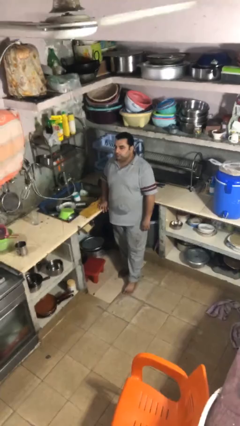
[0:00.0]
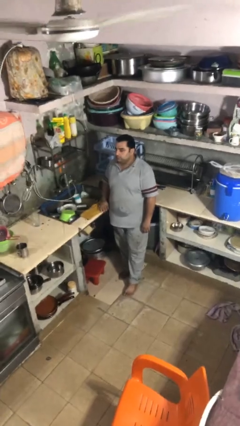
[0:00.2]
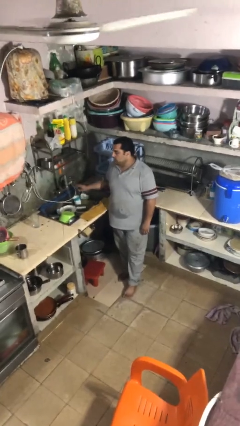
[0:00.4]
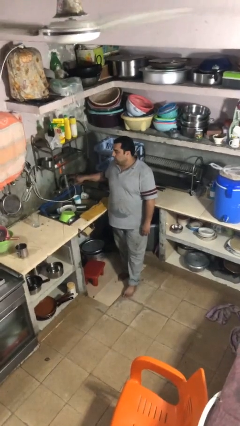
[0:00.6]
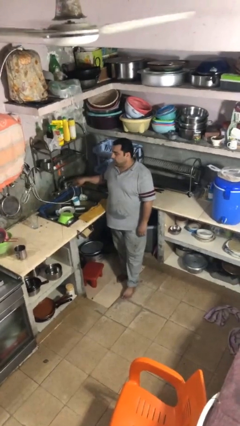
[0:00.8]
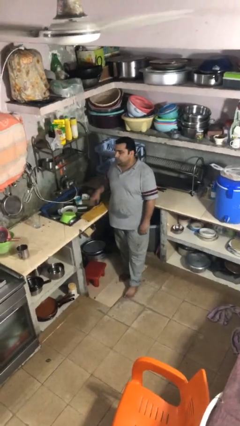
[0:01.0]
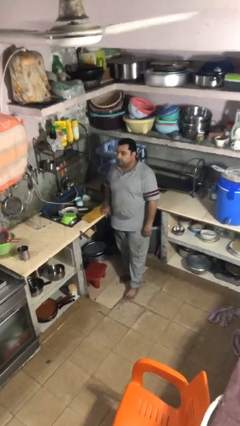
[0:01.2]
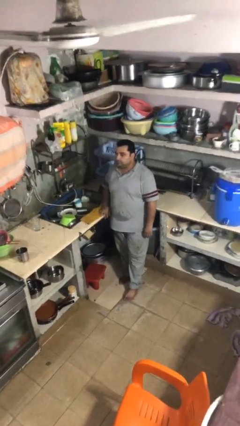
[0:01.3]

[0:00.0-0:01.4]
person turns off faucet

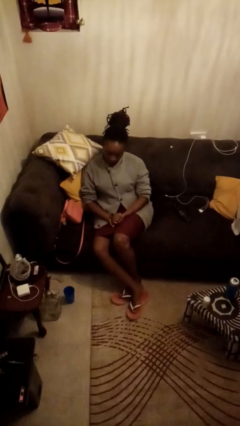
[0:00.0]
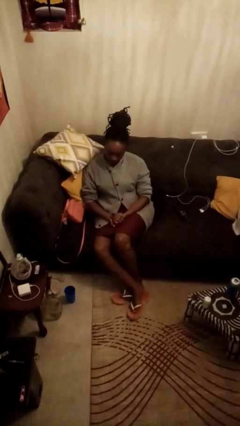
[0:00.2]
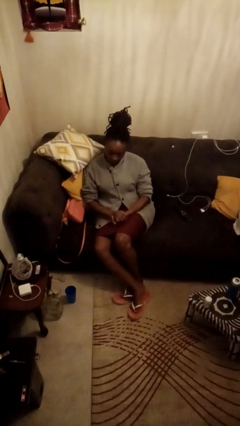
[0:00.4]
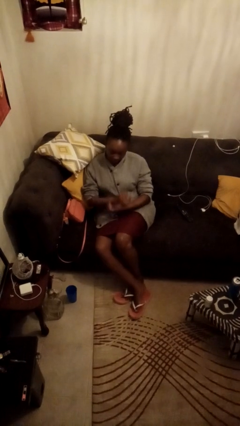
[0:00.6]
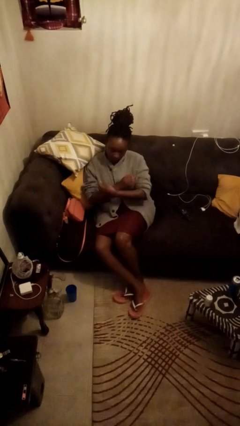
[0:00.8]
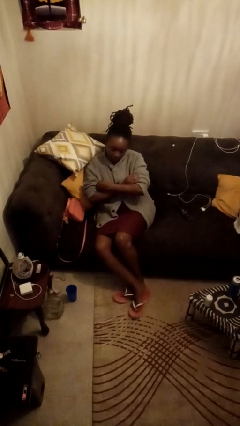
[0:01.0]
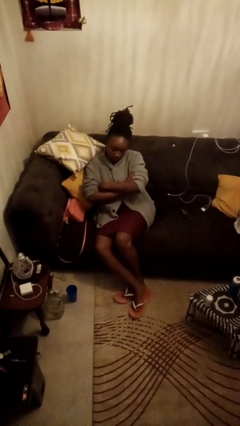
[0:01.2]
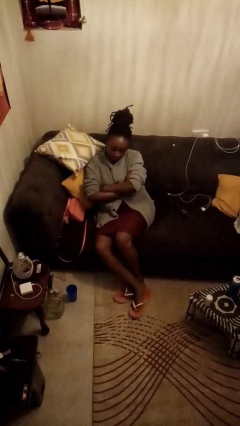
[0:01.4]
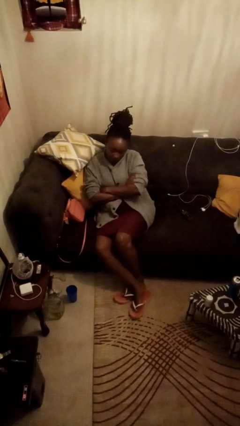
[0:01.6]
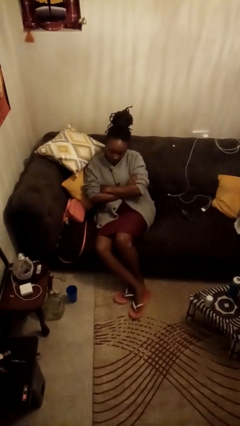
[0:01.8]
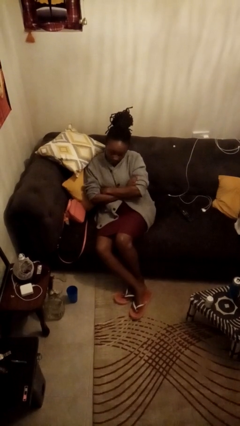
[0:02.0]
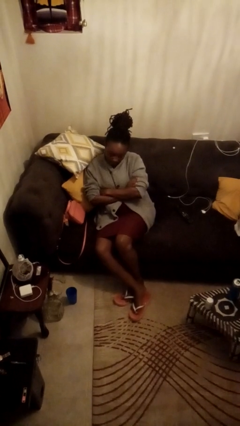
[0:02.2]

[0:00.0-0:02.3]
person crosses arms

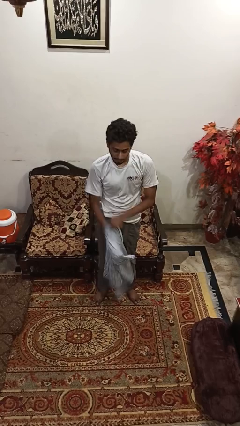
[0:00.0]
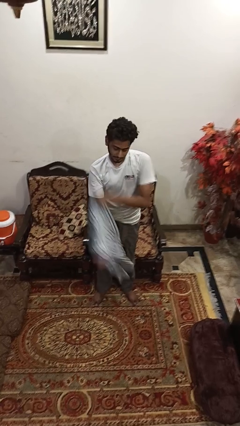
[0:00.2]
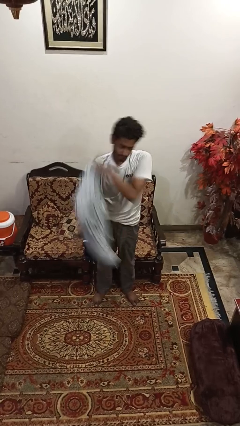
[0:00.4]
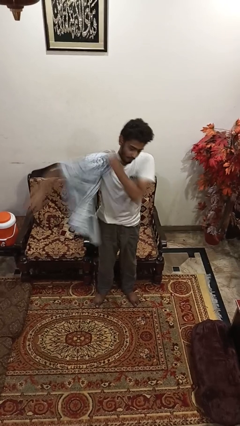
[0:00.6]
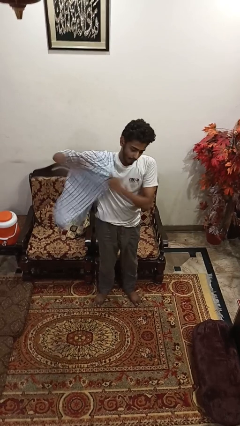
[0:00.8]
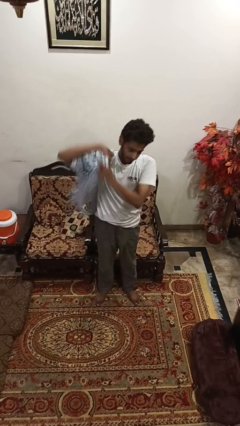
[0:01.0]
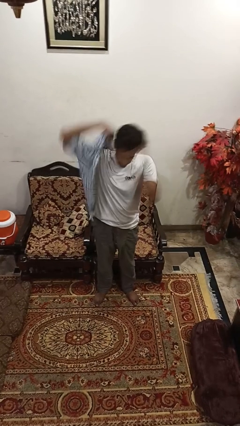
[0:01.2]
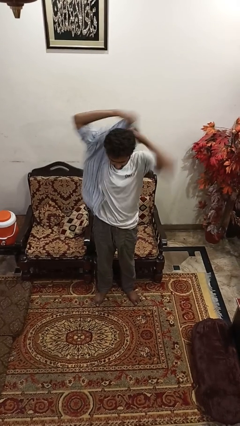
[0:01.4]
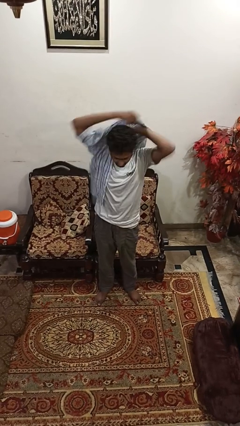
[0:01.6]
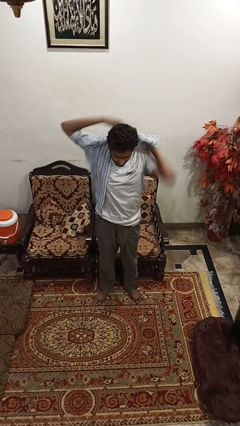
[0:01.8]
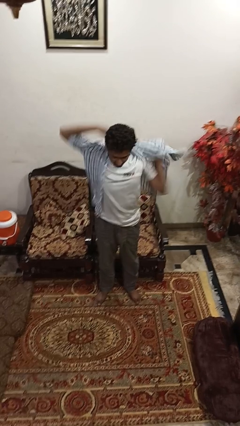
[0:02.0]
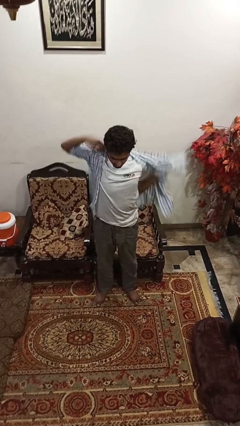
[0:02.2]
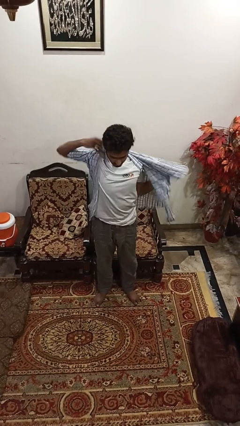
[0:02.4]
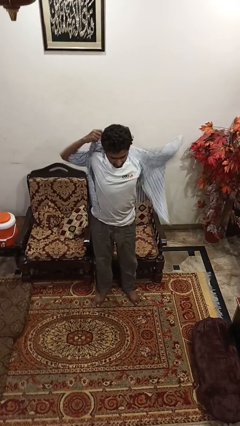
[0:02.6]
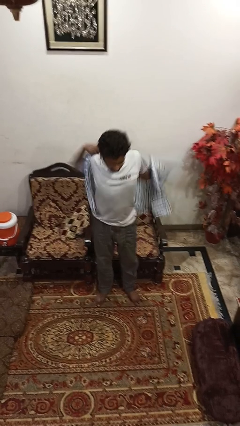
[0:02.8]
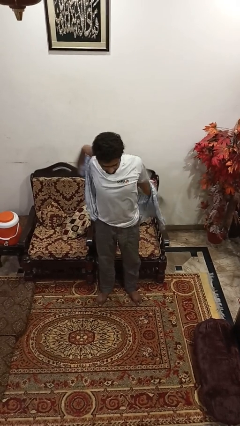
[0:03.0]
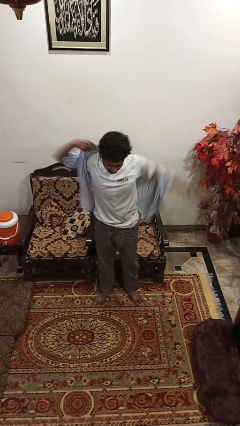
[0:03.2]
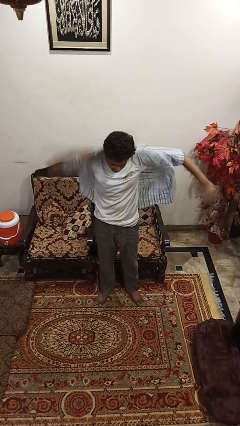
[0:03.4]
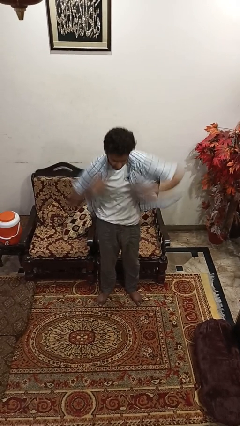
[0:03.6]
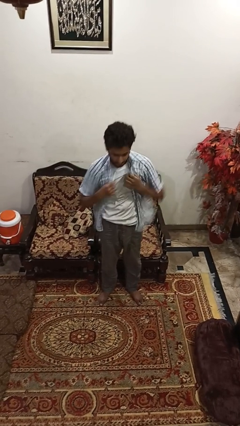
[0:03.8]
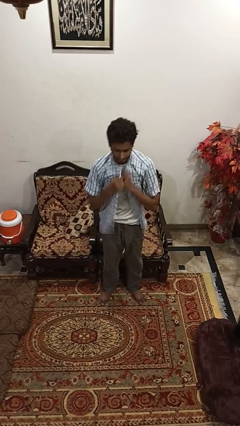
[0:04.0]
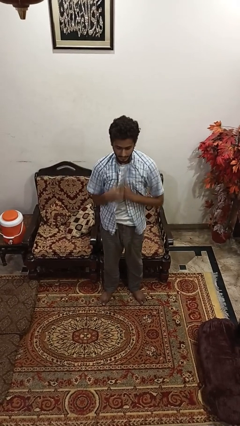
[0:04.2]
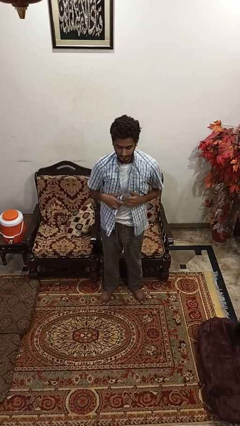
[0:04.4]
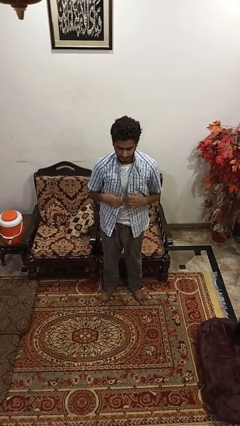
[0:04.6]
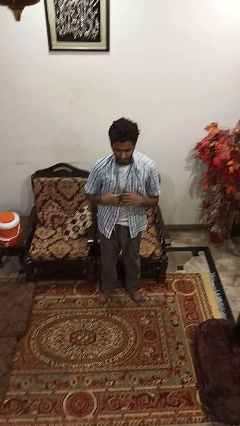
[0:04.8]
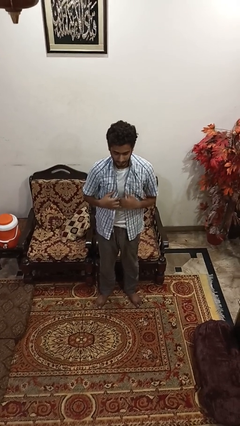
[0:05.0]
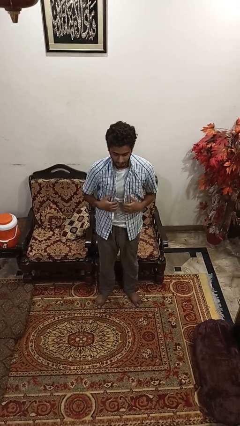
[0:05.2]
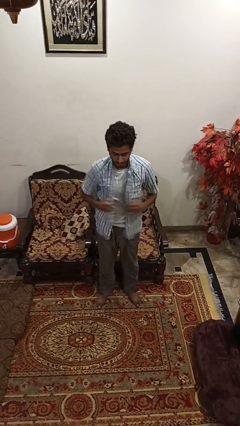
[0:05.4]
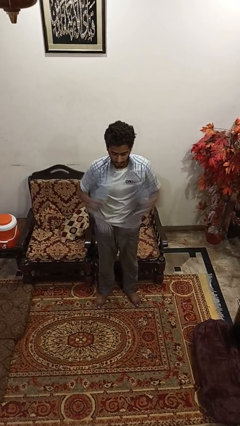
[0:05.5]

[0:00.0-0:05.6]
person puts on shirt

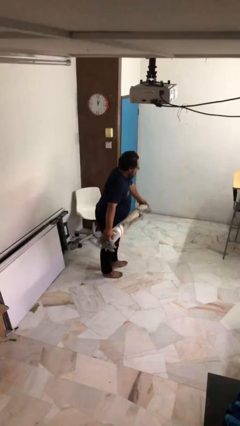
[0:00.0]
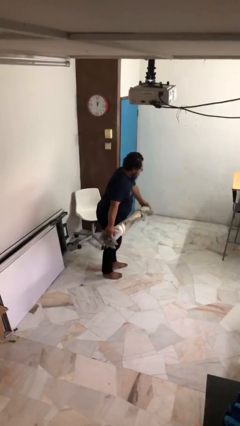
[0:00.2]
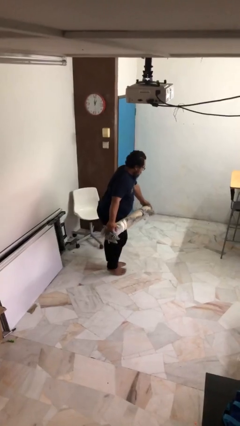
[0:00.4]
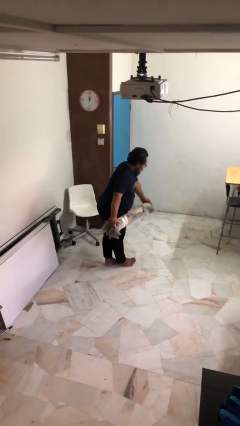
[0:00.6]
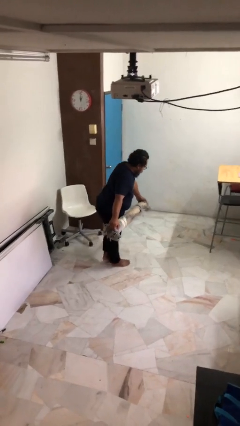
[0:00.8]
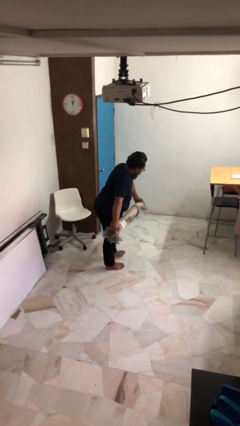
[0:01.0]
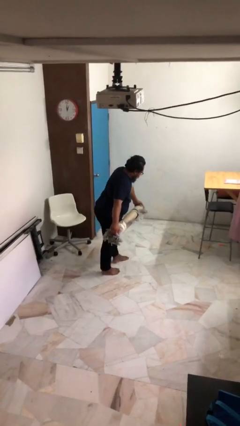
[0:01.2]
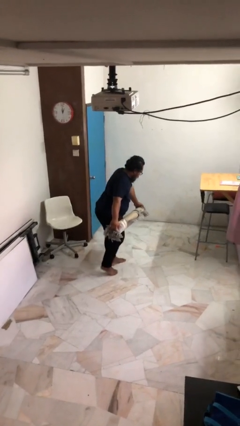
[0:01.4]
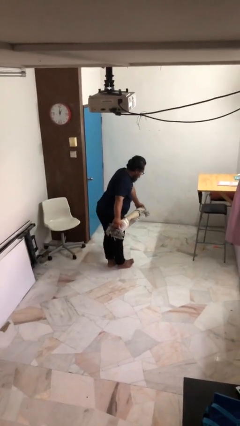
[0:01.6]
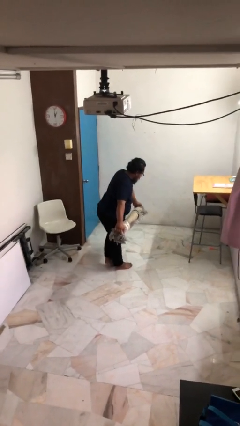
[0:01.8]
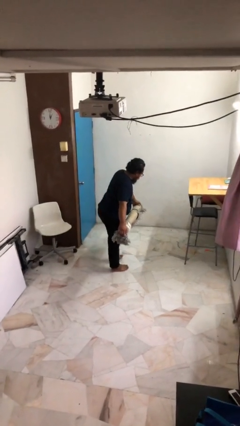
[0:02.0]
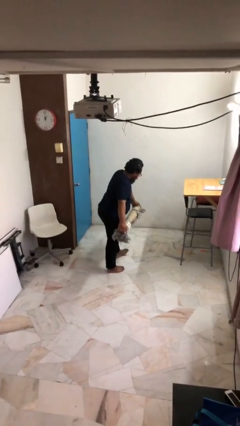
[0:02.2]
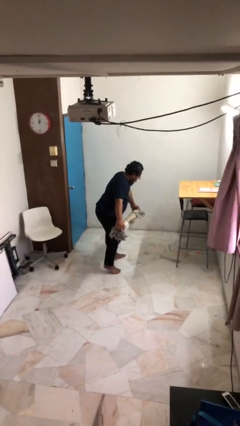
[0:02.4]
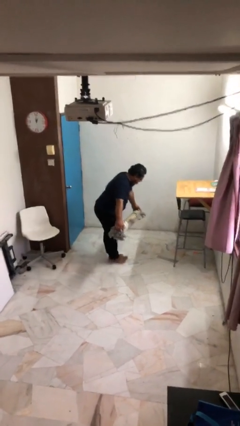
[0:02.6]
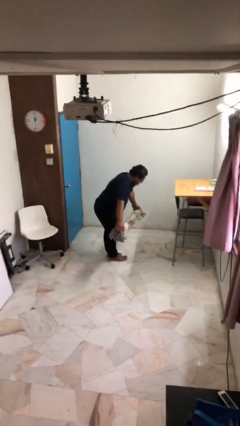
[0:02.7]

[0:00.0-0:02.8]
person carries heavy object

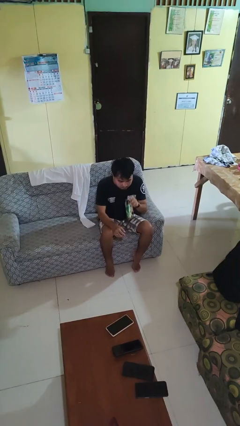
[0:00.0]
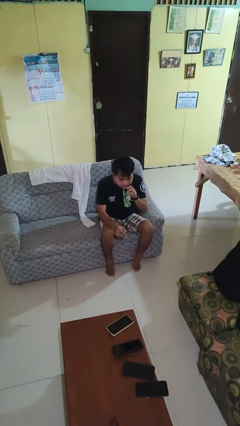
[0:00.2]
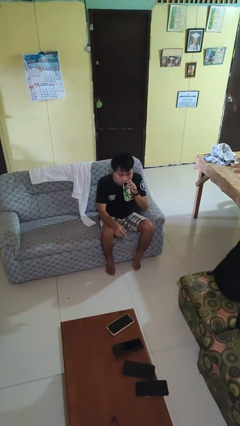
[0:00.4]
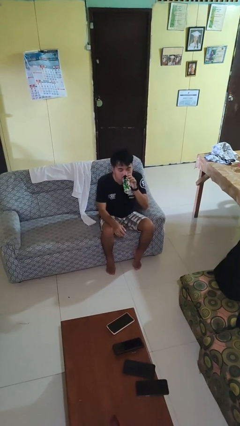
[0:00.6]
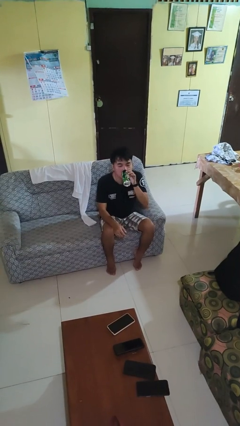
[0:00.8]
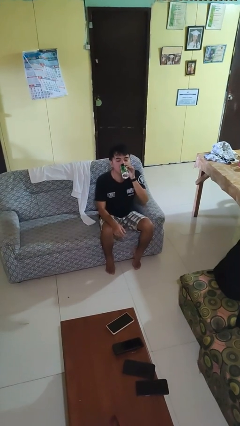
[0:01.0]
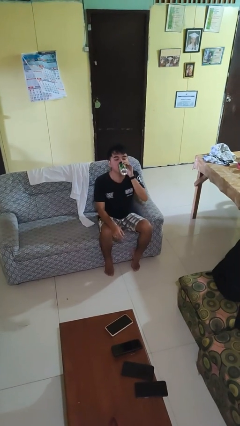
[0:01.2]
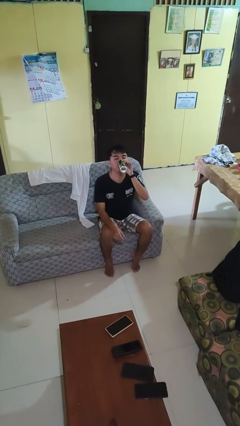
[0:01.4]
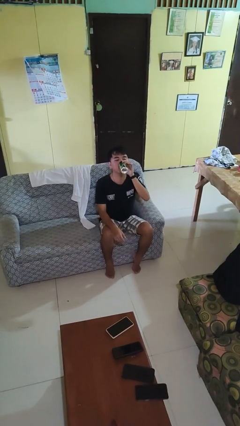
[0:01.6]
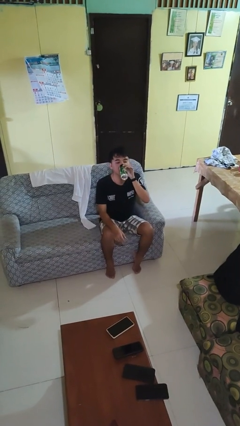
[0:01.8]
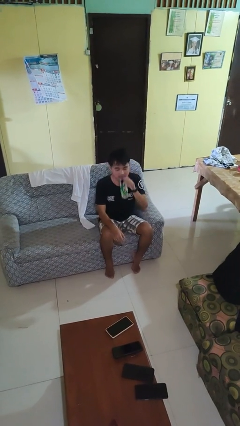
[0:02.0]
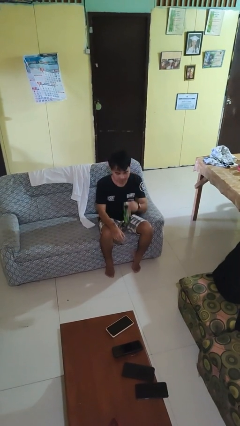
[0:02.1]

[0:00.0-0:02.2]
person drinks from beverage can

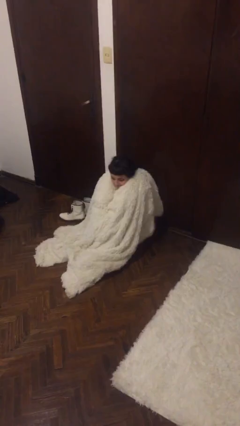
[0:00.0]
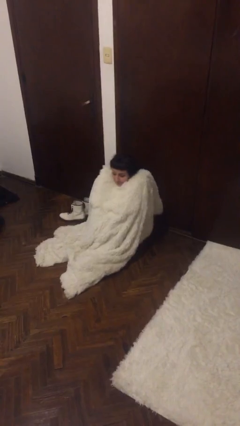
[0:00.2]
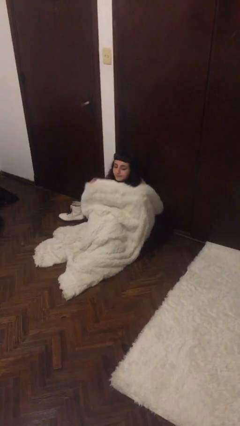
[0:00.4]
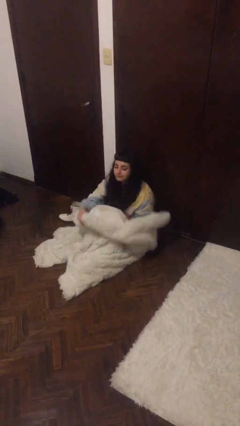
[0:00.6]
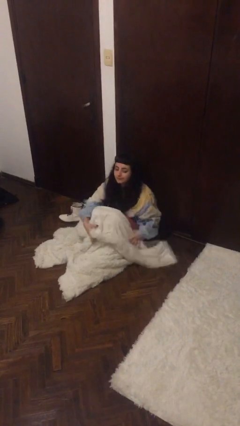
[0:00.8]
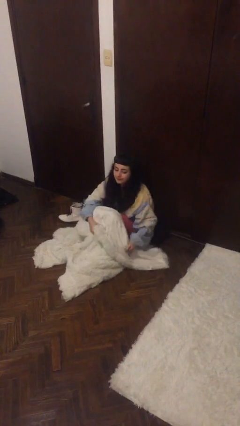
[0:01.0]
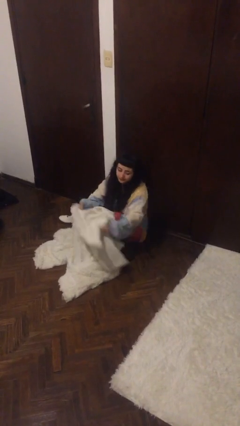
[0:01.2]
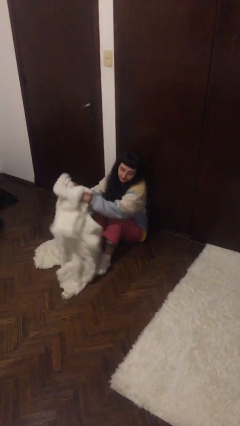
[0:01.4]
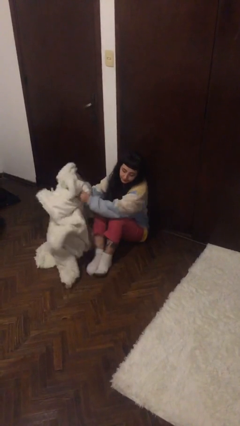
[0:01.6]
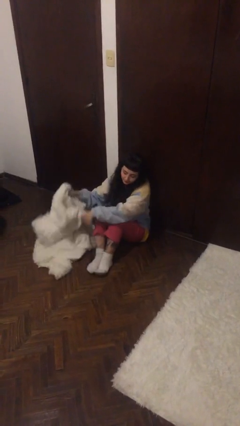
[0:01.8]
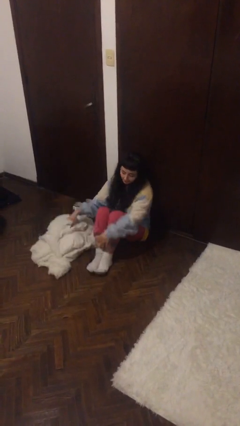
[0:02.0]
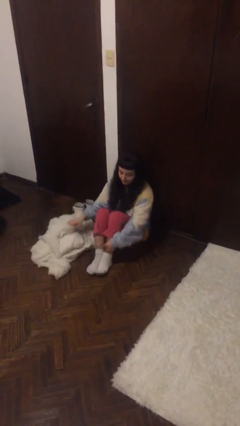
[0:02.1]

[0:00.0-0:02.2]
person uncovers with blanket

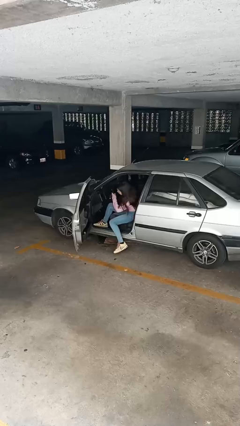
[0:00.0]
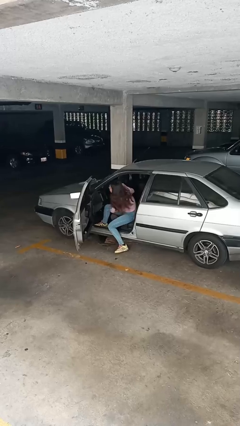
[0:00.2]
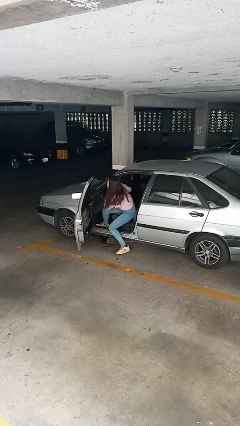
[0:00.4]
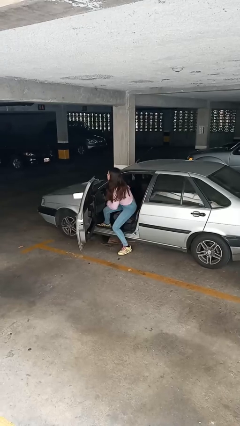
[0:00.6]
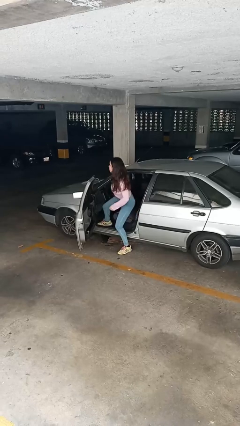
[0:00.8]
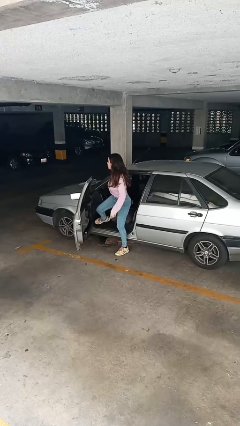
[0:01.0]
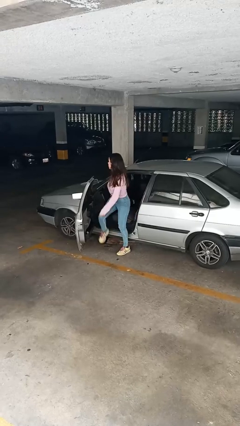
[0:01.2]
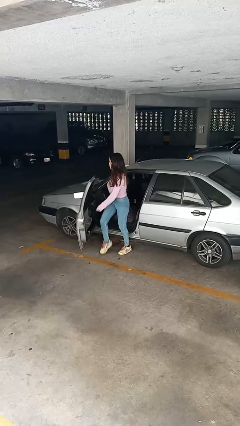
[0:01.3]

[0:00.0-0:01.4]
person exits car
